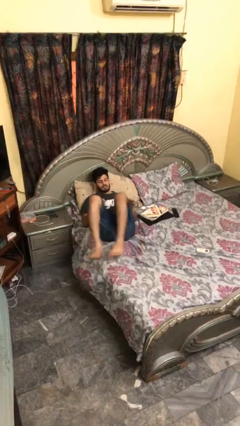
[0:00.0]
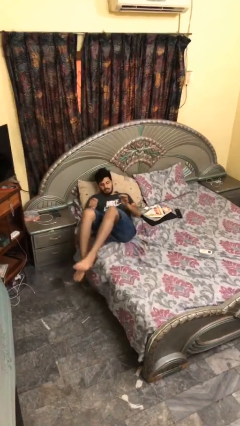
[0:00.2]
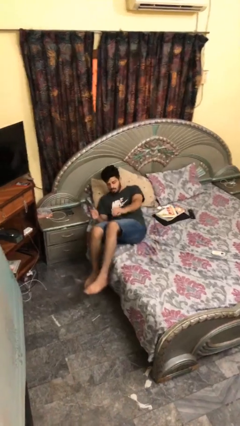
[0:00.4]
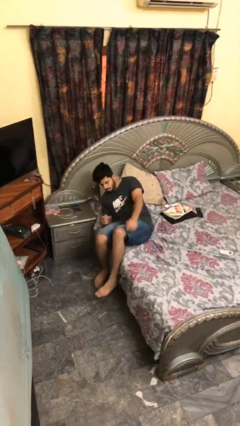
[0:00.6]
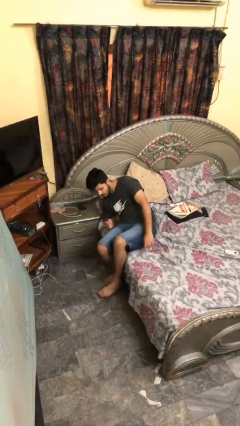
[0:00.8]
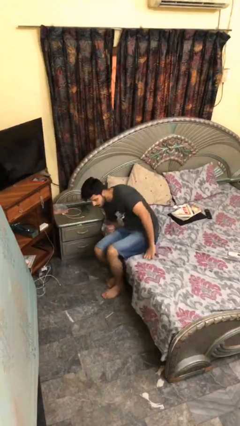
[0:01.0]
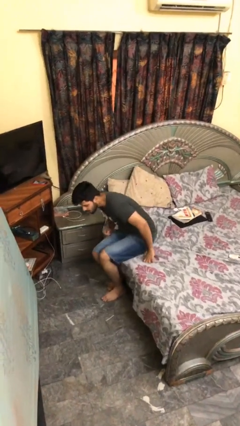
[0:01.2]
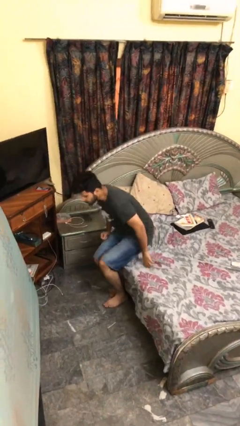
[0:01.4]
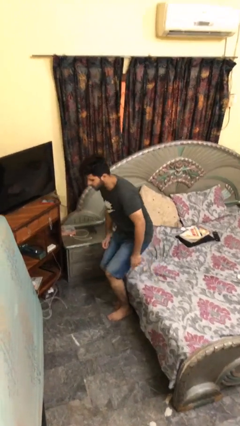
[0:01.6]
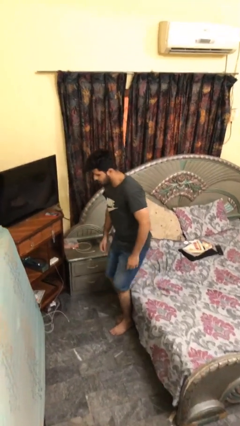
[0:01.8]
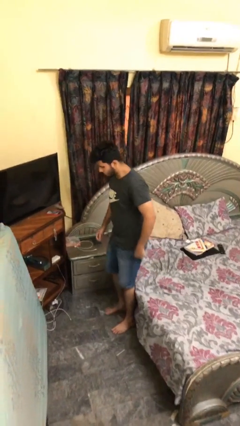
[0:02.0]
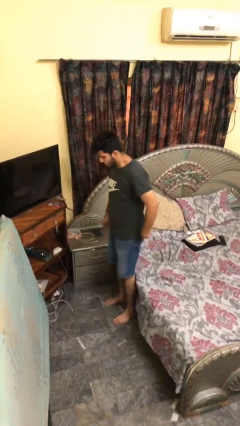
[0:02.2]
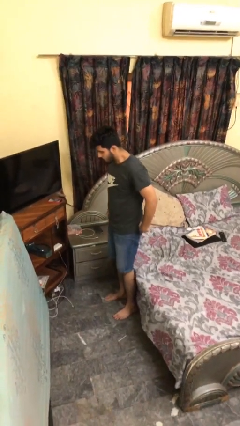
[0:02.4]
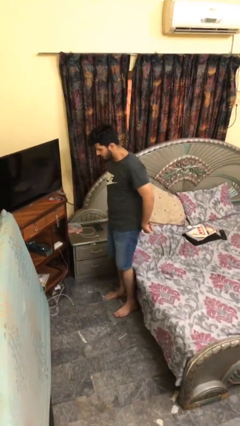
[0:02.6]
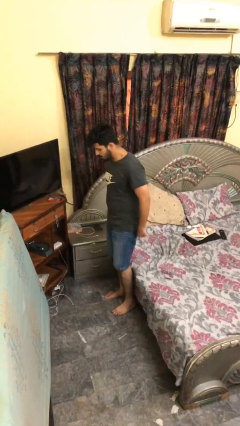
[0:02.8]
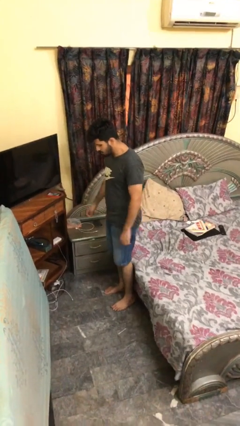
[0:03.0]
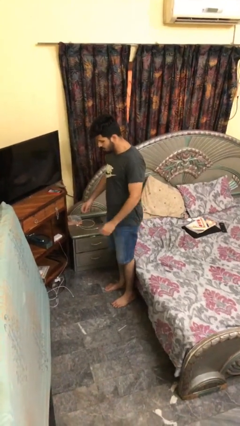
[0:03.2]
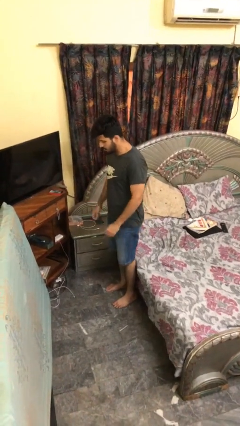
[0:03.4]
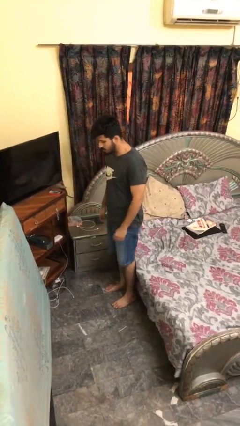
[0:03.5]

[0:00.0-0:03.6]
person stands up

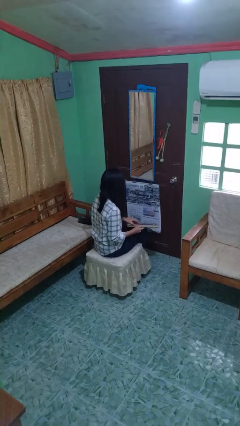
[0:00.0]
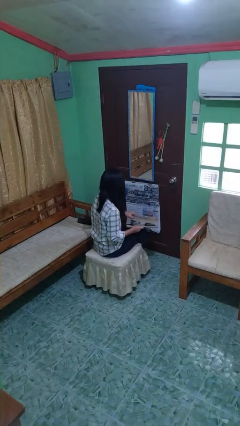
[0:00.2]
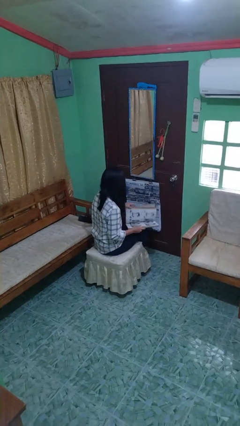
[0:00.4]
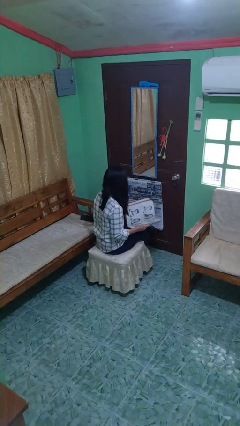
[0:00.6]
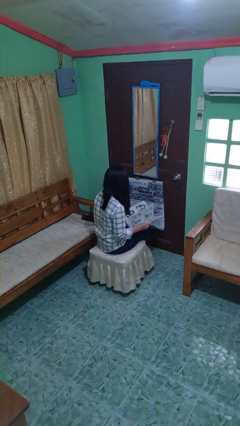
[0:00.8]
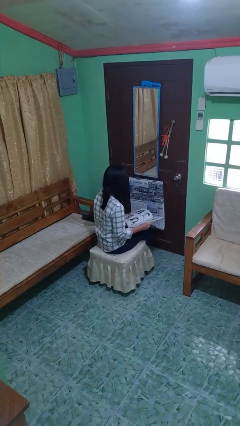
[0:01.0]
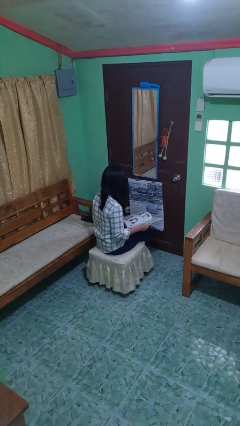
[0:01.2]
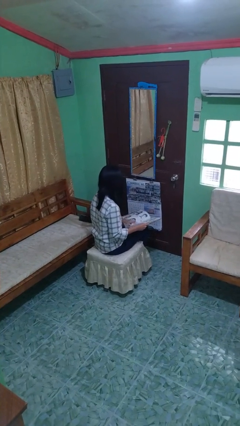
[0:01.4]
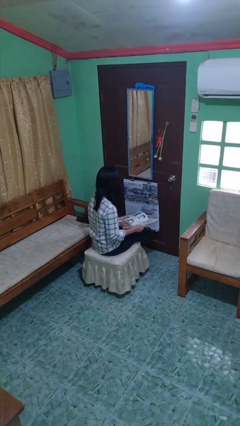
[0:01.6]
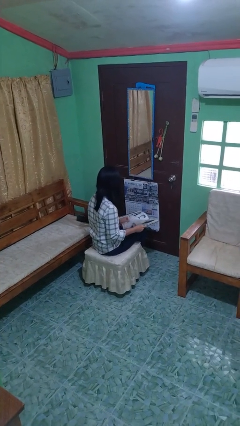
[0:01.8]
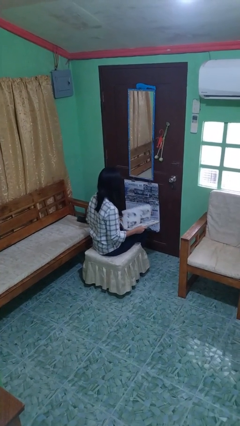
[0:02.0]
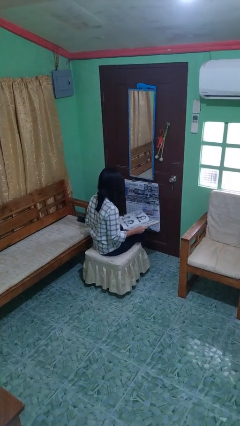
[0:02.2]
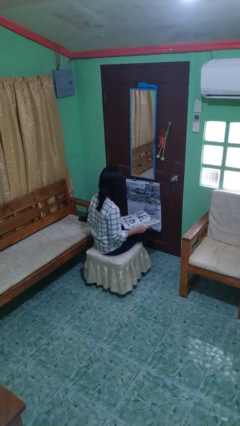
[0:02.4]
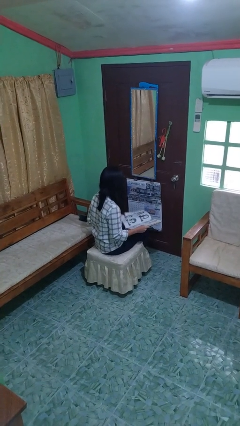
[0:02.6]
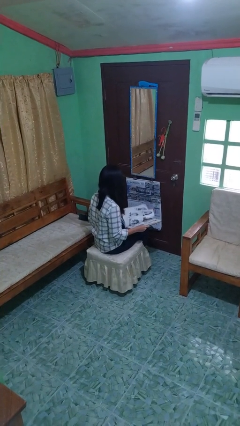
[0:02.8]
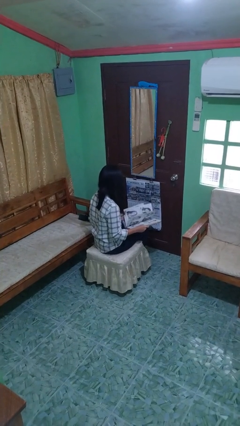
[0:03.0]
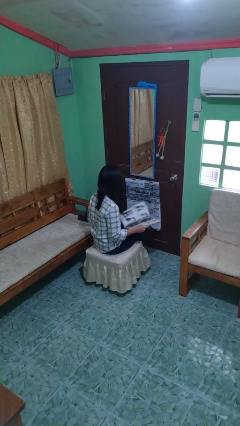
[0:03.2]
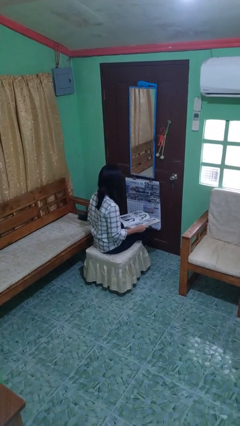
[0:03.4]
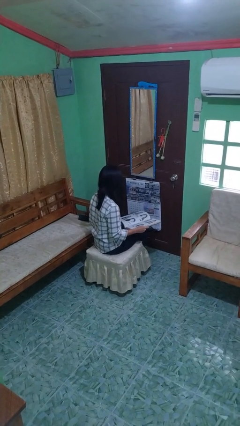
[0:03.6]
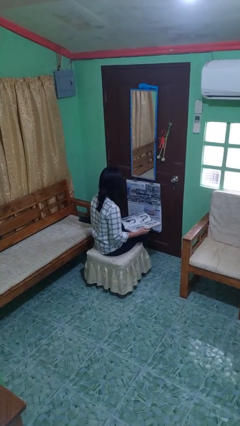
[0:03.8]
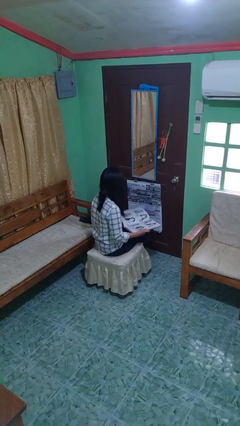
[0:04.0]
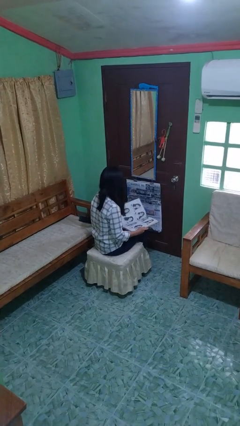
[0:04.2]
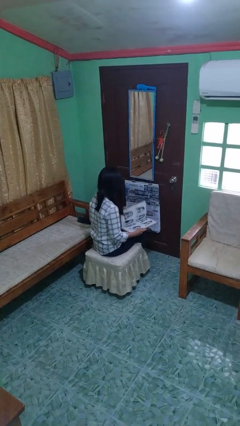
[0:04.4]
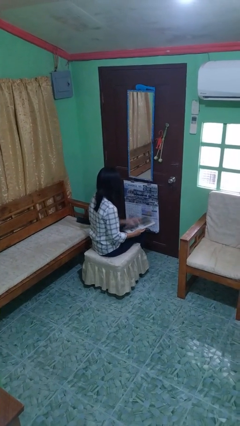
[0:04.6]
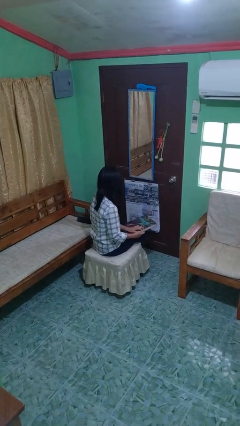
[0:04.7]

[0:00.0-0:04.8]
person reads book

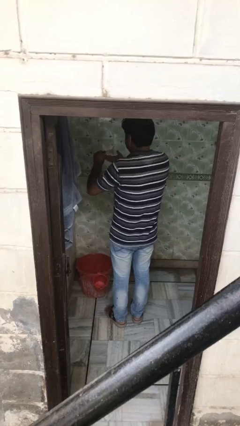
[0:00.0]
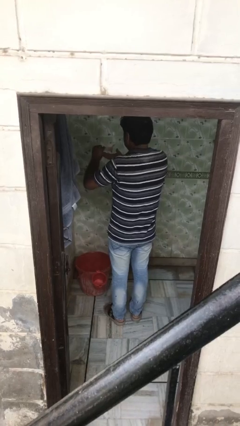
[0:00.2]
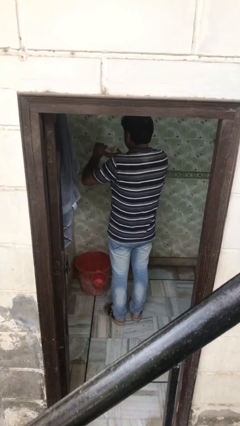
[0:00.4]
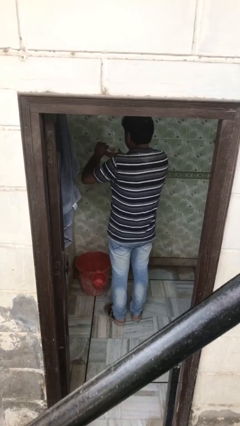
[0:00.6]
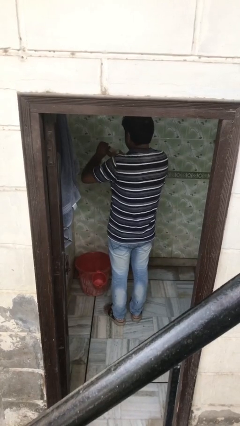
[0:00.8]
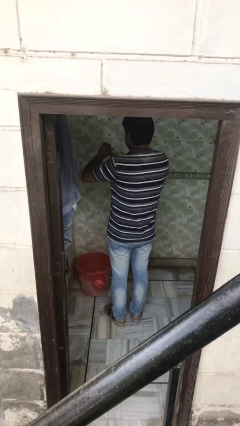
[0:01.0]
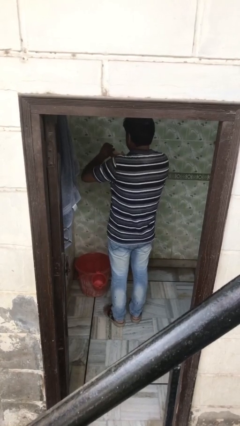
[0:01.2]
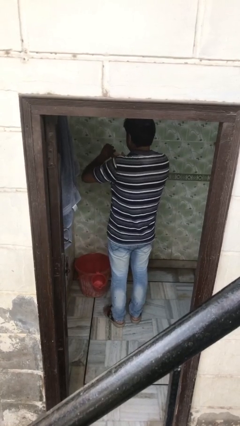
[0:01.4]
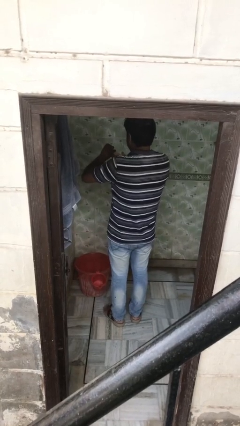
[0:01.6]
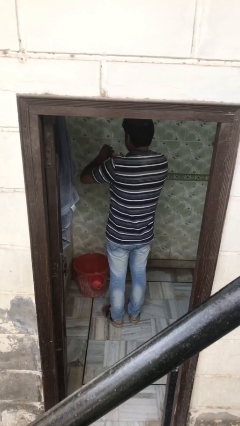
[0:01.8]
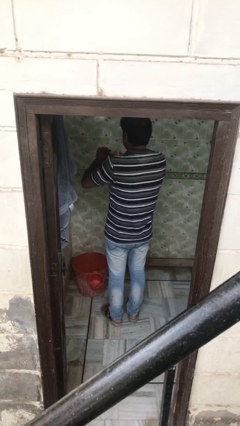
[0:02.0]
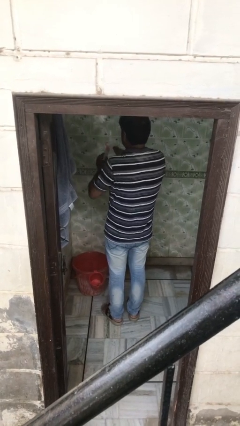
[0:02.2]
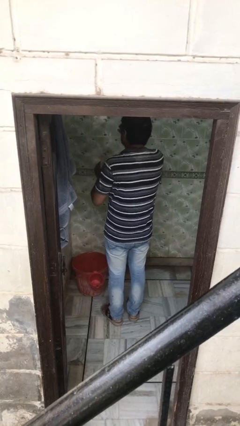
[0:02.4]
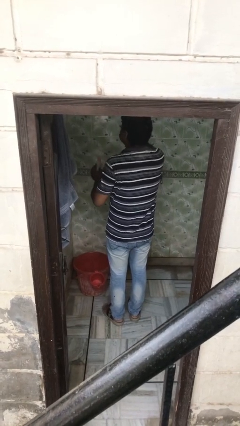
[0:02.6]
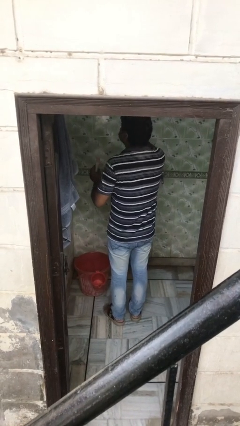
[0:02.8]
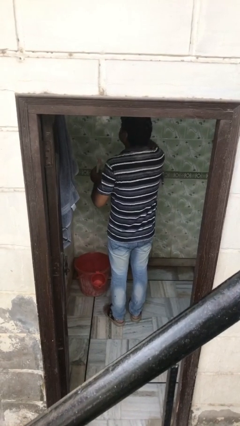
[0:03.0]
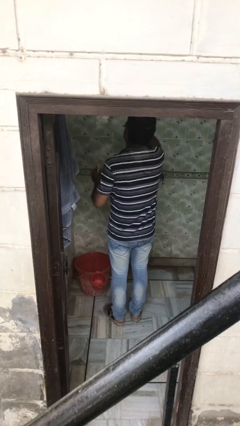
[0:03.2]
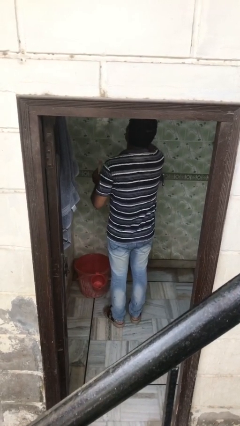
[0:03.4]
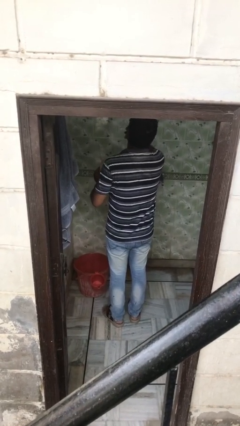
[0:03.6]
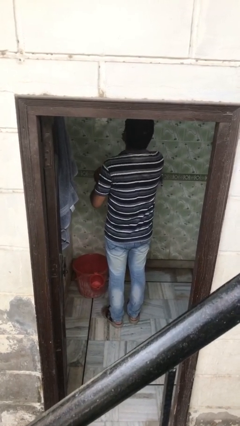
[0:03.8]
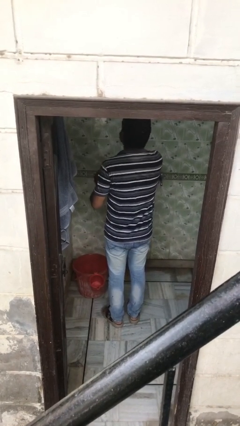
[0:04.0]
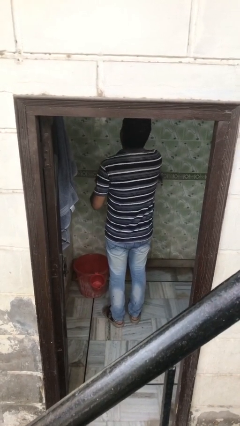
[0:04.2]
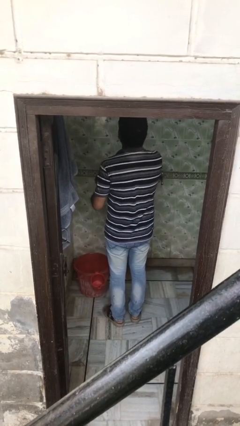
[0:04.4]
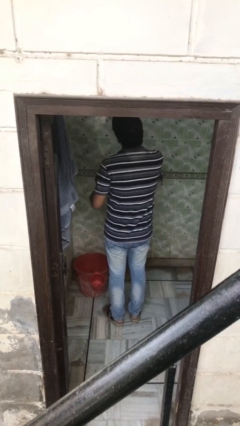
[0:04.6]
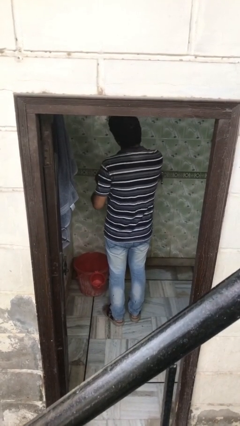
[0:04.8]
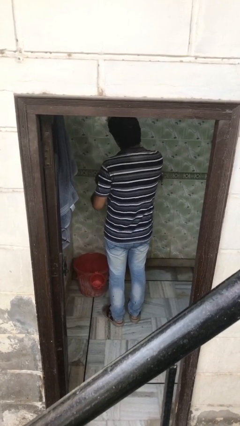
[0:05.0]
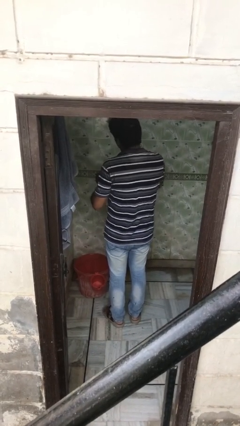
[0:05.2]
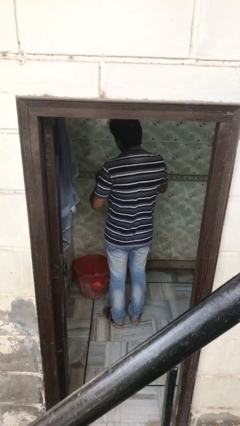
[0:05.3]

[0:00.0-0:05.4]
person applies facial moisturizer

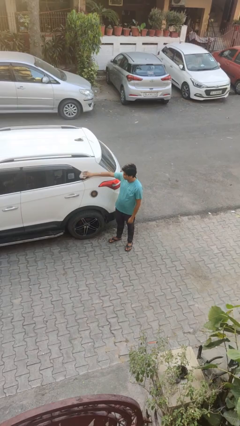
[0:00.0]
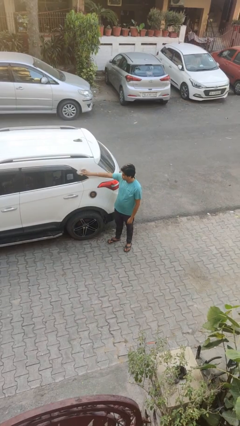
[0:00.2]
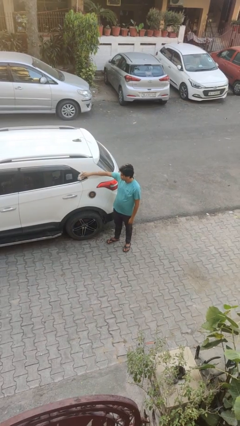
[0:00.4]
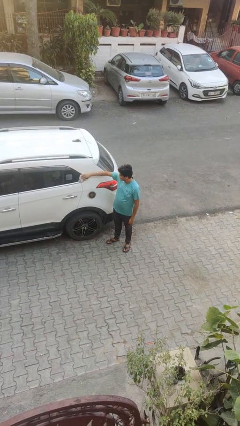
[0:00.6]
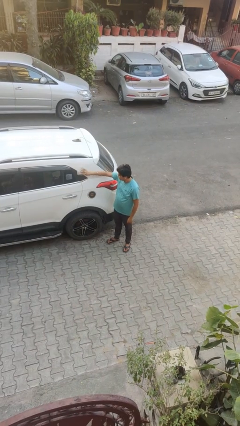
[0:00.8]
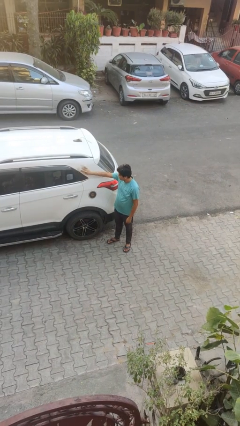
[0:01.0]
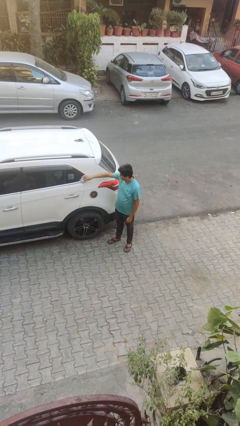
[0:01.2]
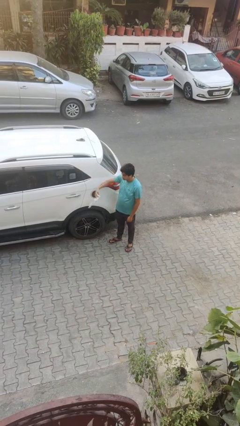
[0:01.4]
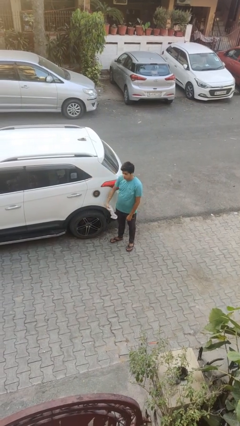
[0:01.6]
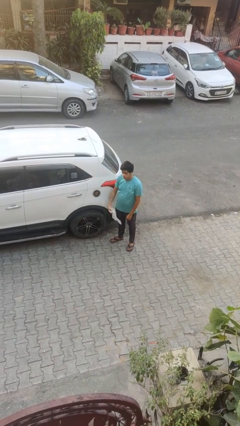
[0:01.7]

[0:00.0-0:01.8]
person polishes car with rag

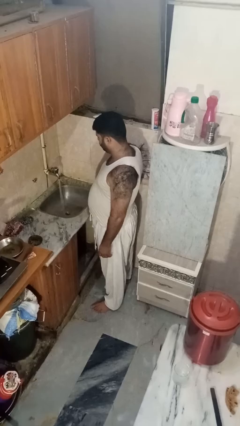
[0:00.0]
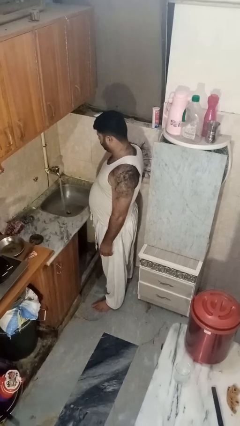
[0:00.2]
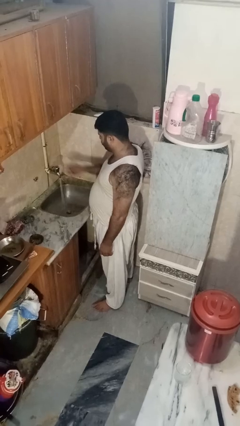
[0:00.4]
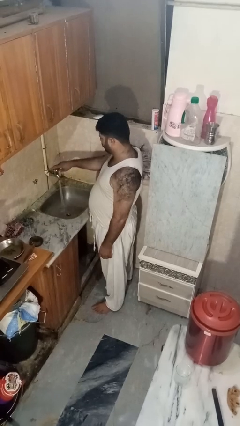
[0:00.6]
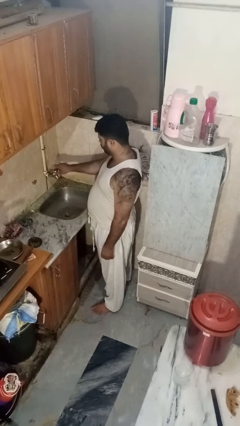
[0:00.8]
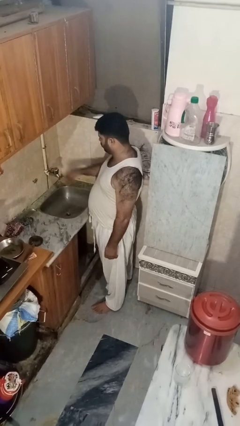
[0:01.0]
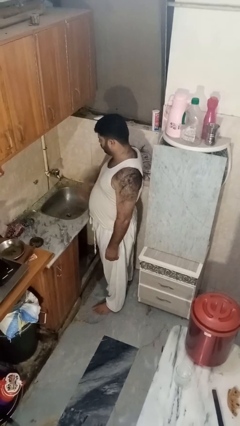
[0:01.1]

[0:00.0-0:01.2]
person turns off faucet

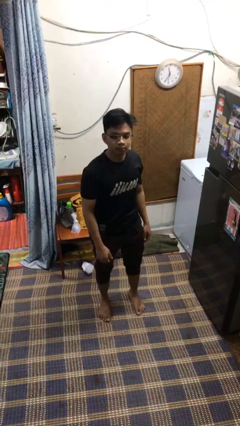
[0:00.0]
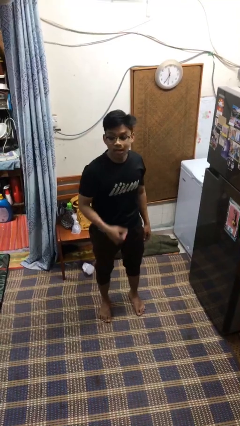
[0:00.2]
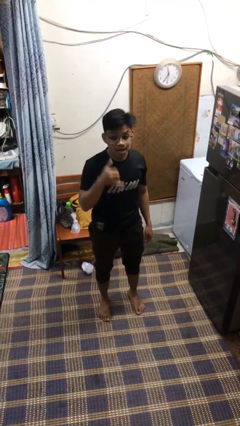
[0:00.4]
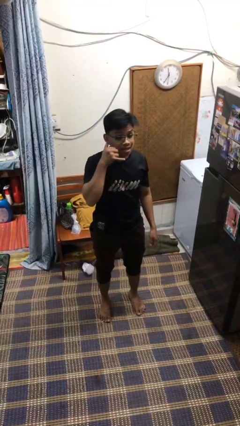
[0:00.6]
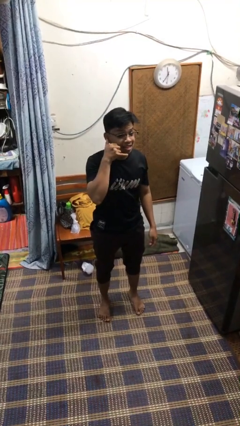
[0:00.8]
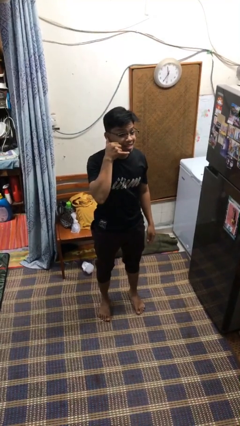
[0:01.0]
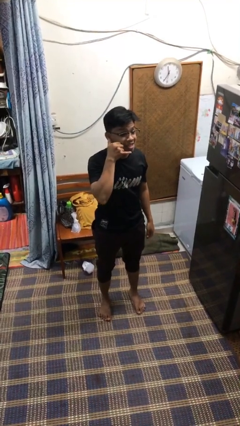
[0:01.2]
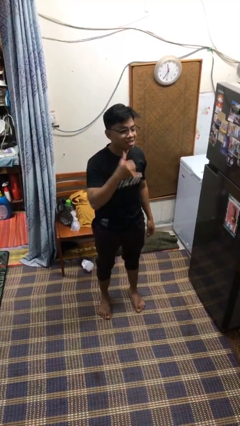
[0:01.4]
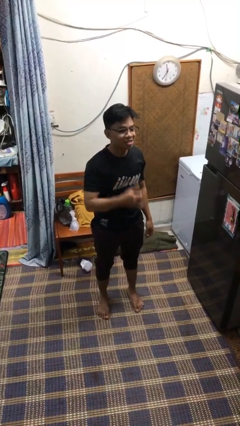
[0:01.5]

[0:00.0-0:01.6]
person gestures call me
